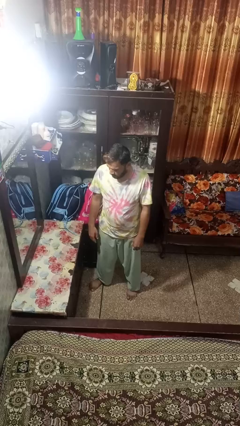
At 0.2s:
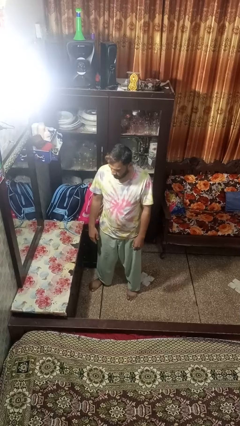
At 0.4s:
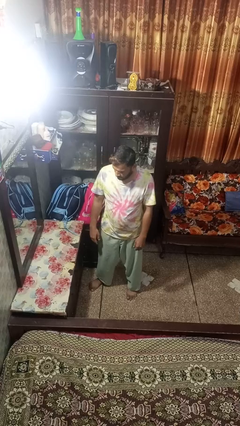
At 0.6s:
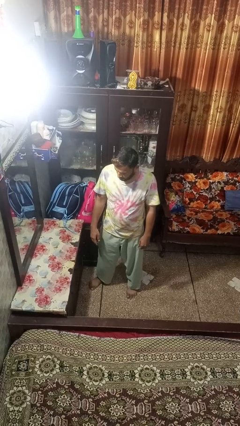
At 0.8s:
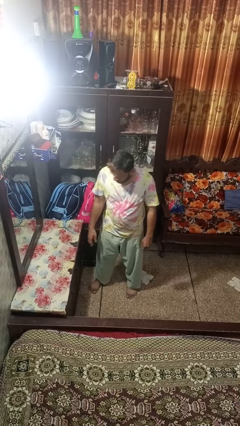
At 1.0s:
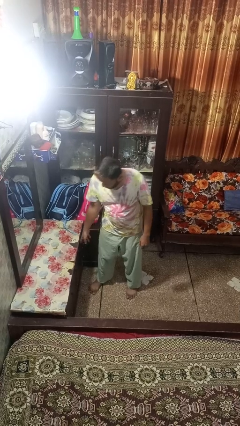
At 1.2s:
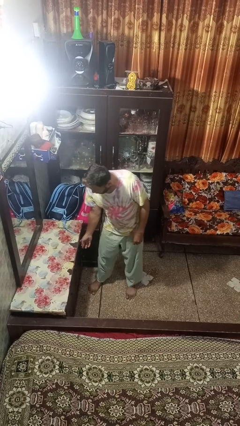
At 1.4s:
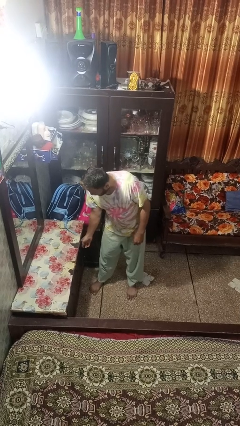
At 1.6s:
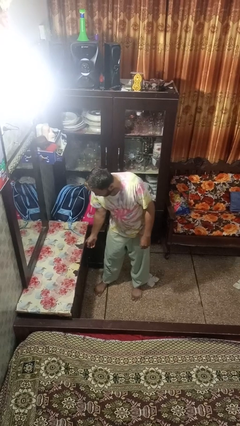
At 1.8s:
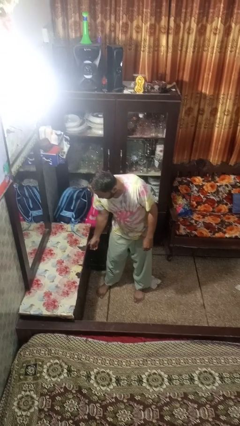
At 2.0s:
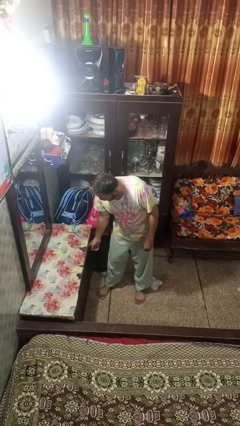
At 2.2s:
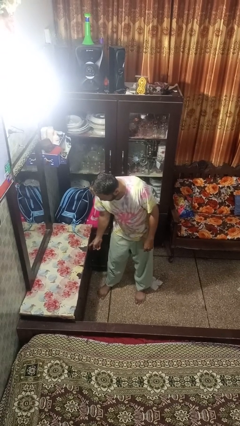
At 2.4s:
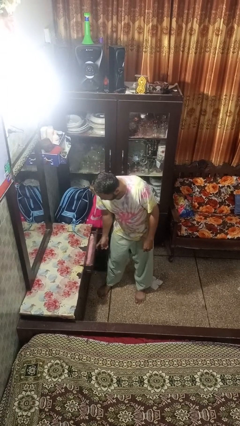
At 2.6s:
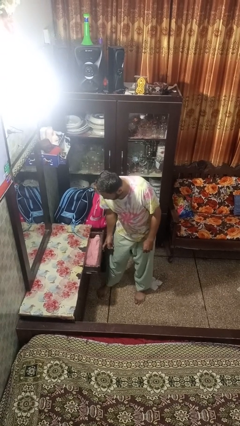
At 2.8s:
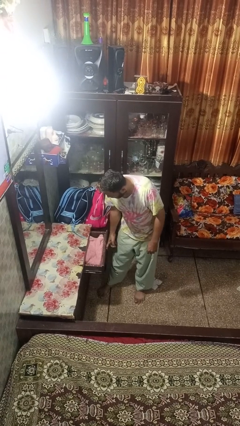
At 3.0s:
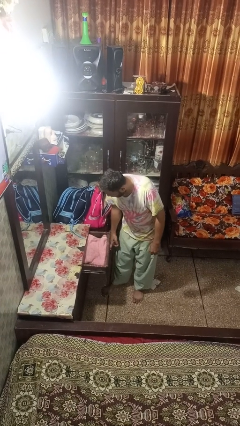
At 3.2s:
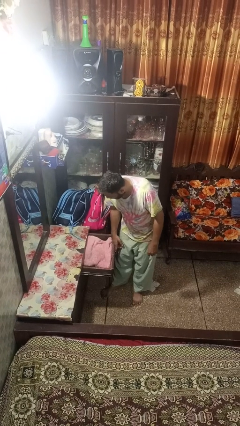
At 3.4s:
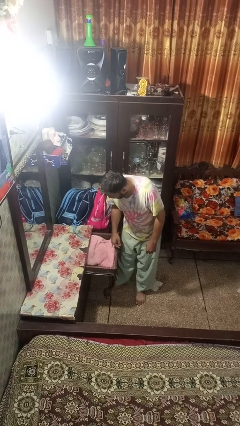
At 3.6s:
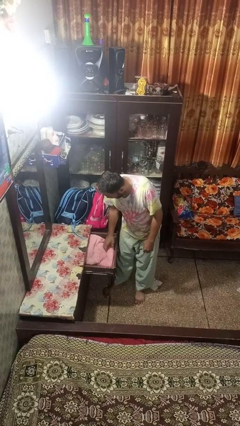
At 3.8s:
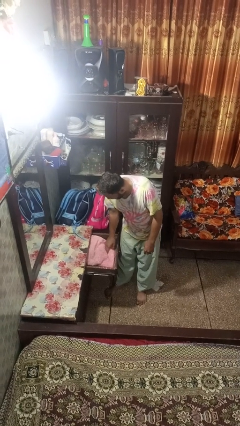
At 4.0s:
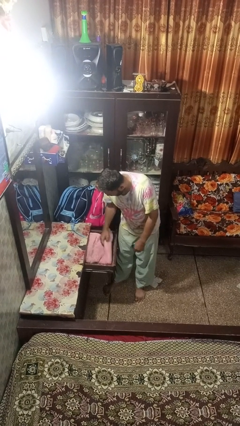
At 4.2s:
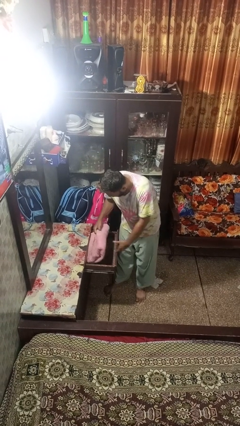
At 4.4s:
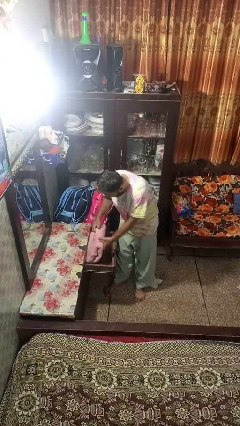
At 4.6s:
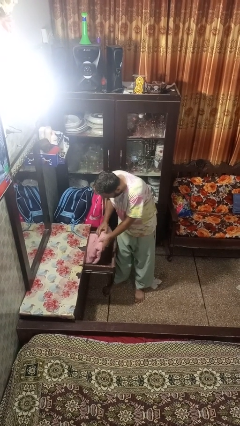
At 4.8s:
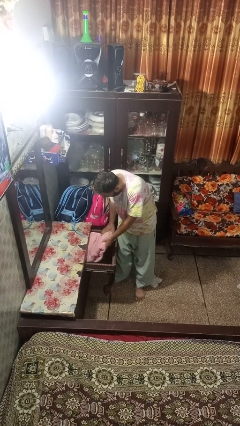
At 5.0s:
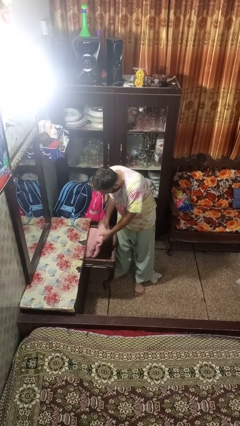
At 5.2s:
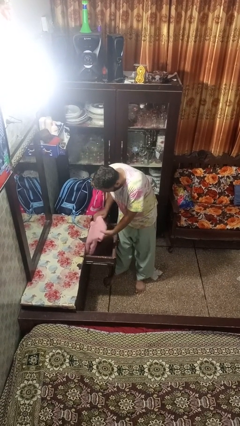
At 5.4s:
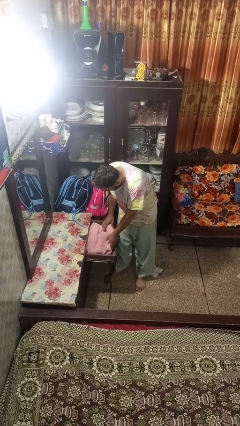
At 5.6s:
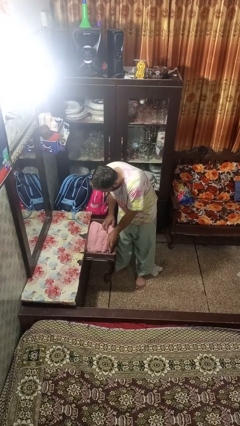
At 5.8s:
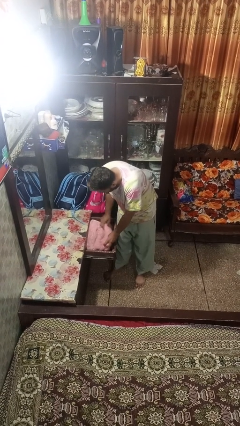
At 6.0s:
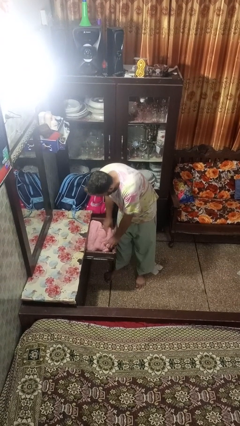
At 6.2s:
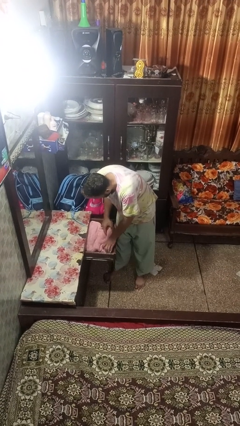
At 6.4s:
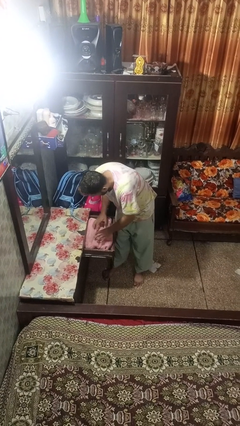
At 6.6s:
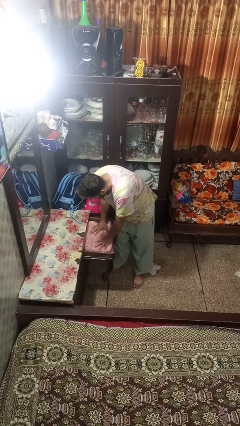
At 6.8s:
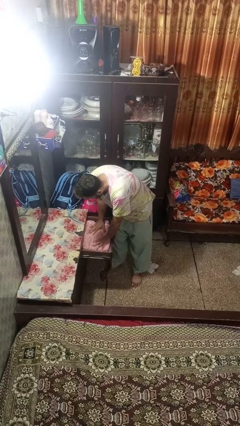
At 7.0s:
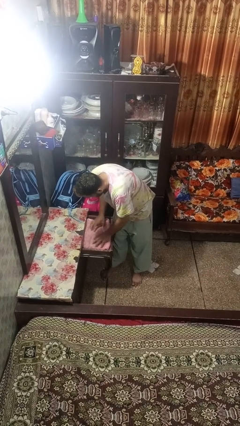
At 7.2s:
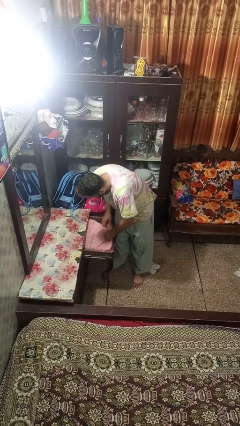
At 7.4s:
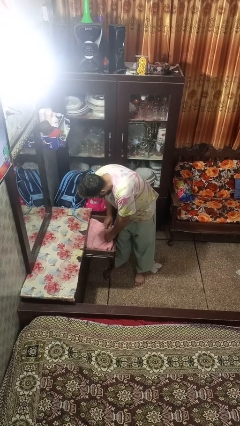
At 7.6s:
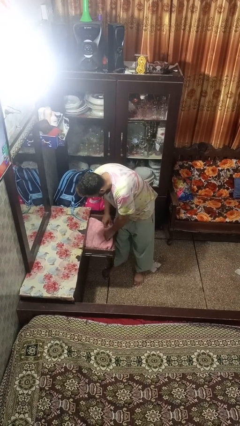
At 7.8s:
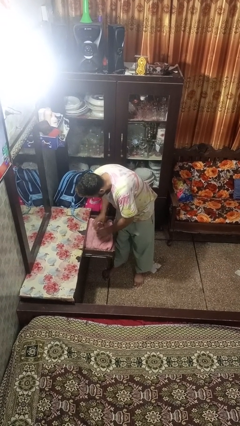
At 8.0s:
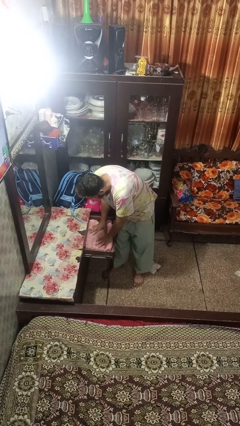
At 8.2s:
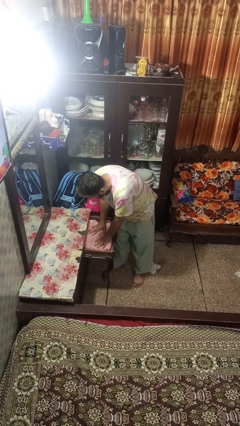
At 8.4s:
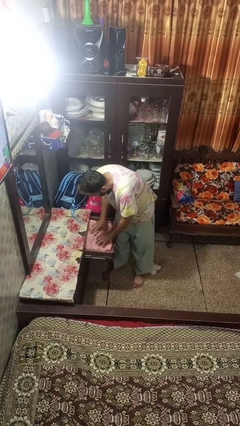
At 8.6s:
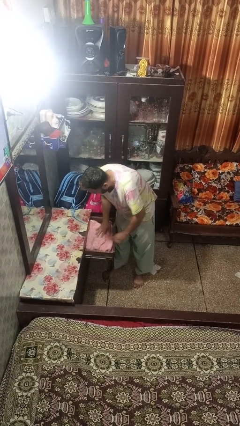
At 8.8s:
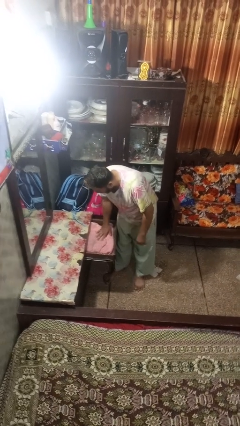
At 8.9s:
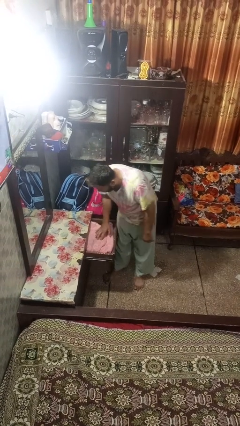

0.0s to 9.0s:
person opens dresser drawer

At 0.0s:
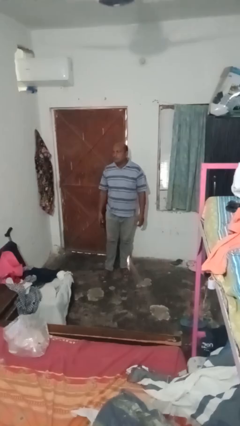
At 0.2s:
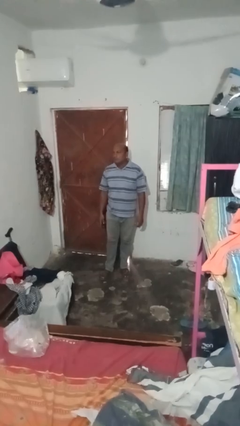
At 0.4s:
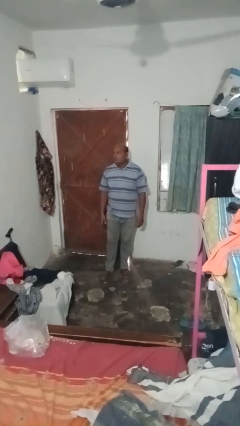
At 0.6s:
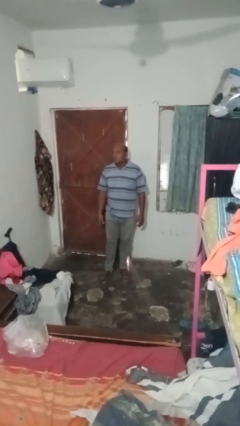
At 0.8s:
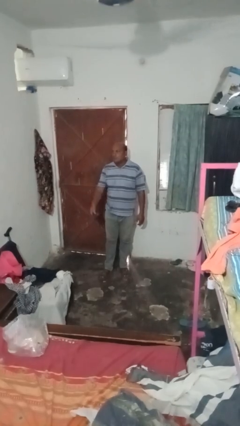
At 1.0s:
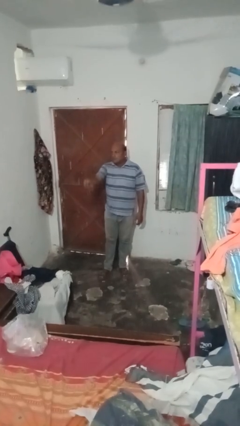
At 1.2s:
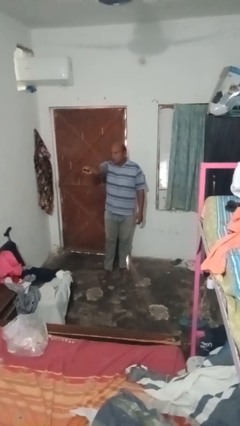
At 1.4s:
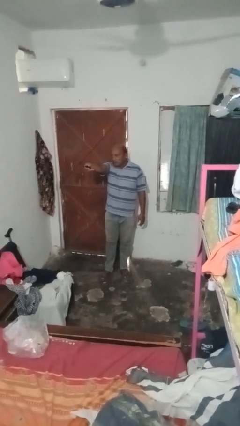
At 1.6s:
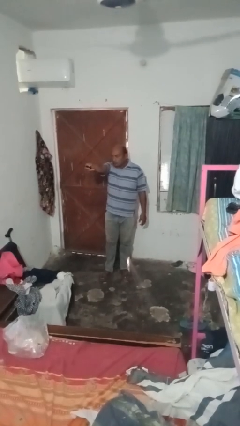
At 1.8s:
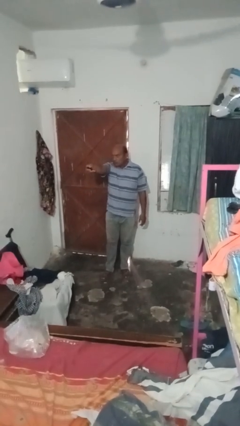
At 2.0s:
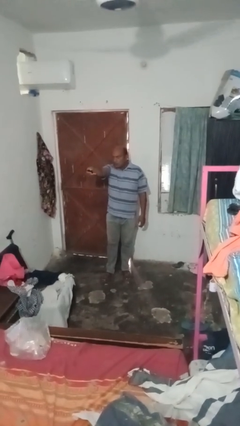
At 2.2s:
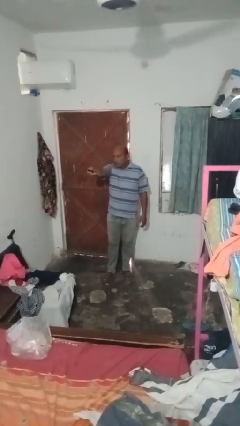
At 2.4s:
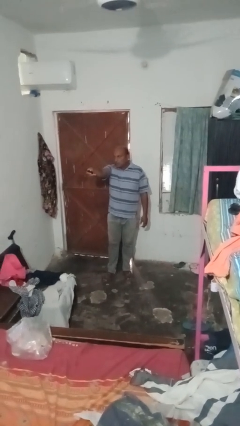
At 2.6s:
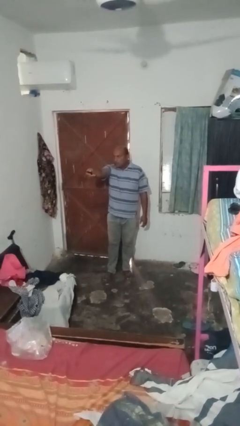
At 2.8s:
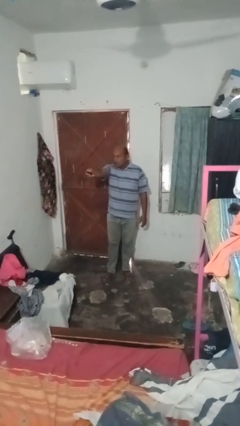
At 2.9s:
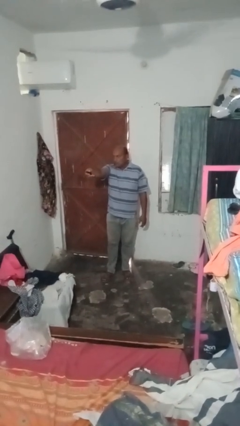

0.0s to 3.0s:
person uses television remote

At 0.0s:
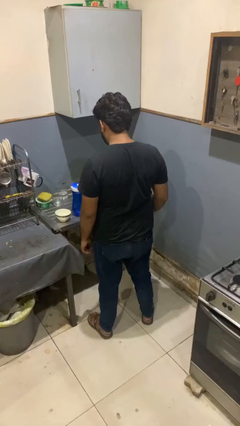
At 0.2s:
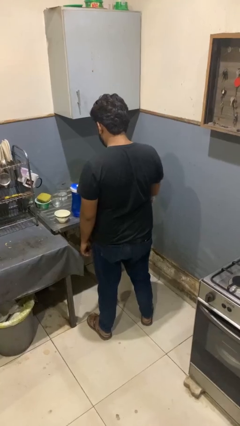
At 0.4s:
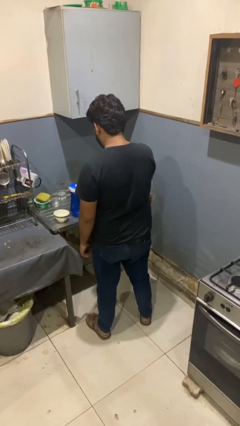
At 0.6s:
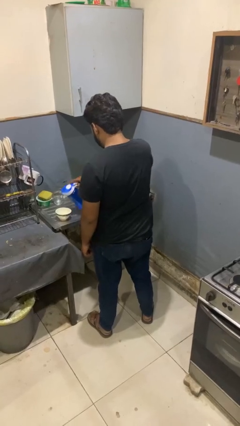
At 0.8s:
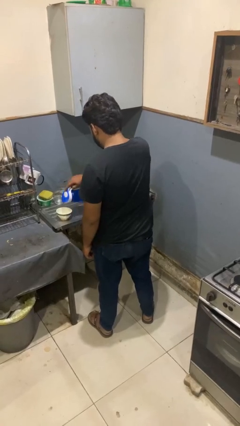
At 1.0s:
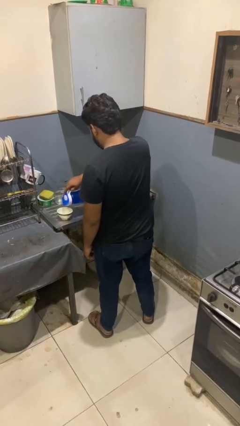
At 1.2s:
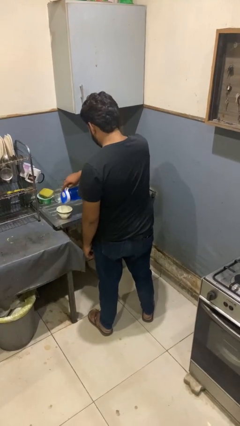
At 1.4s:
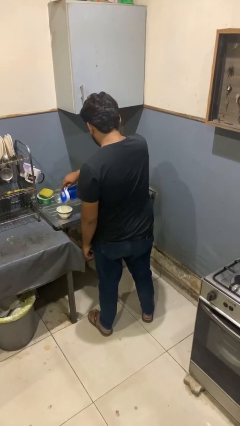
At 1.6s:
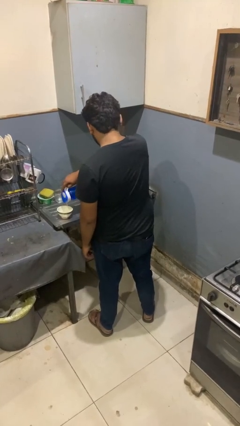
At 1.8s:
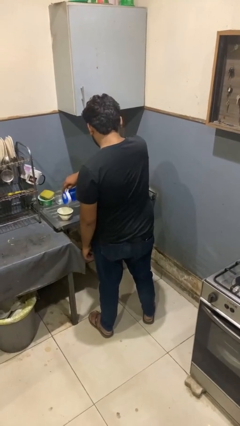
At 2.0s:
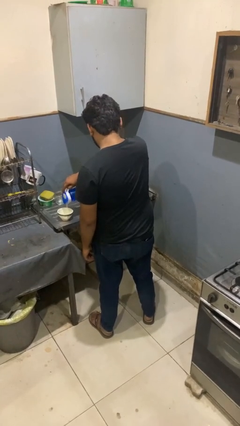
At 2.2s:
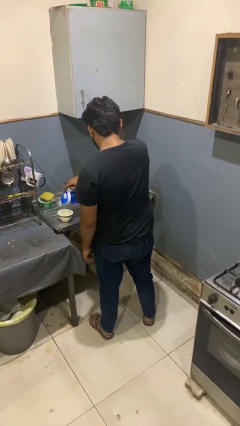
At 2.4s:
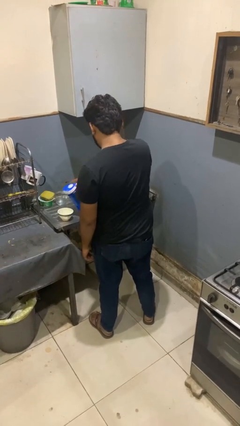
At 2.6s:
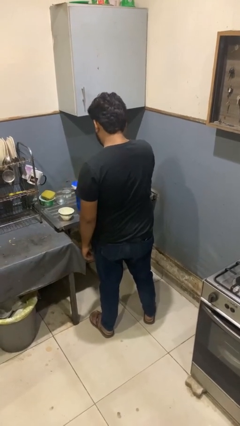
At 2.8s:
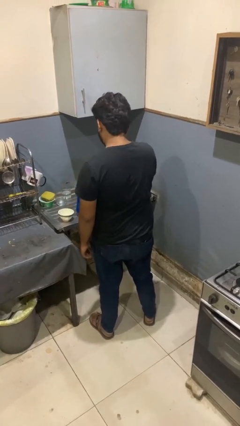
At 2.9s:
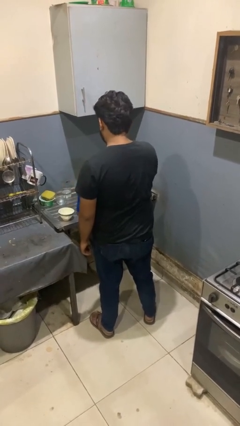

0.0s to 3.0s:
person pours into bowl

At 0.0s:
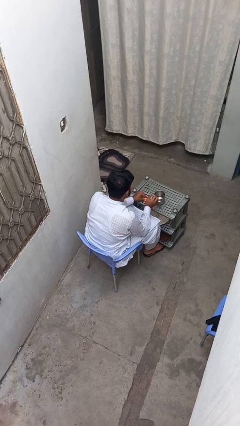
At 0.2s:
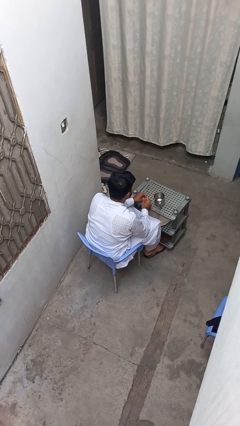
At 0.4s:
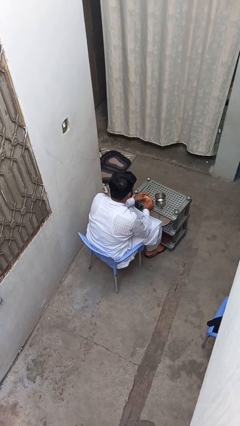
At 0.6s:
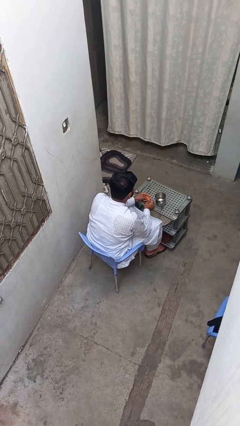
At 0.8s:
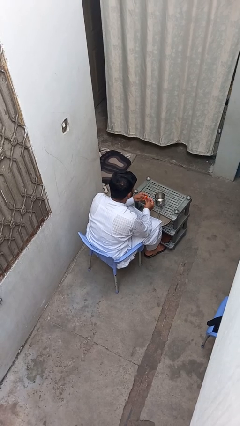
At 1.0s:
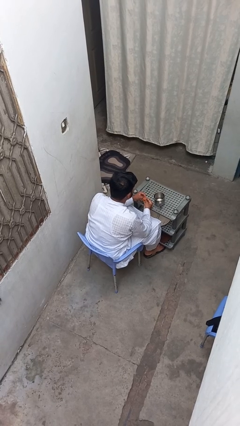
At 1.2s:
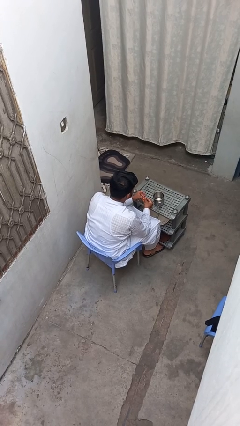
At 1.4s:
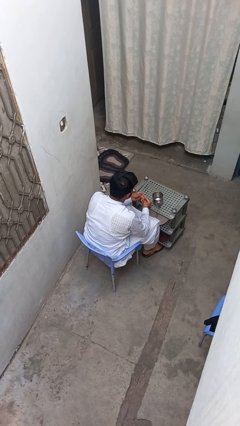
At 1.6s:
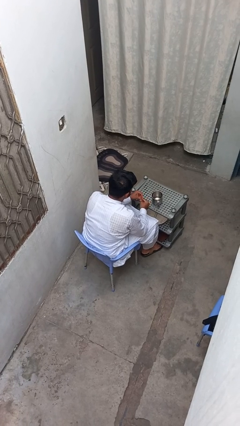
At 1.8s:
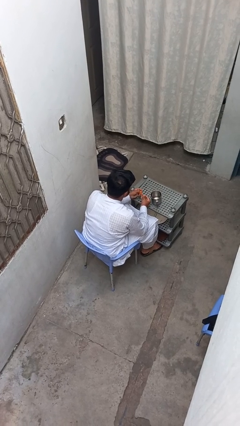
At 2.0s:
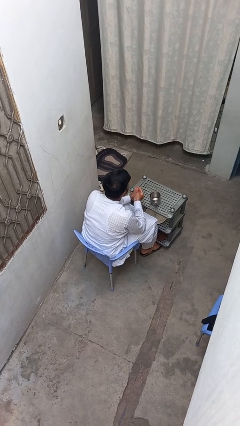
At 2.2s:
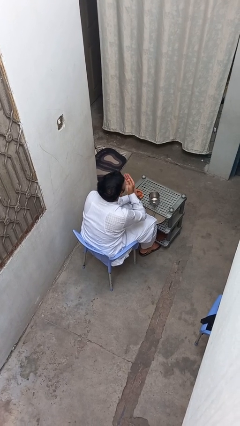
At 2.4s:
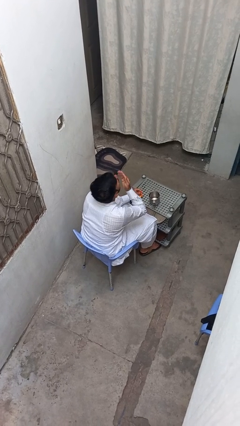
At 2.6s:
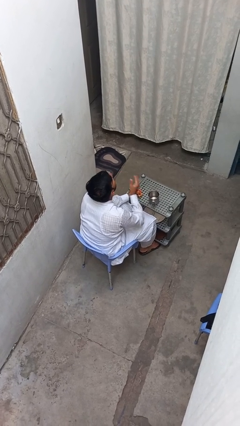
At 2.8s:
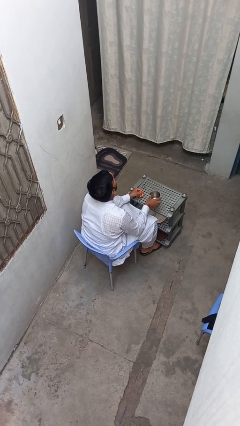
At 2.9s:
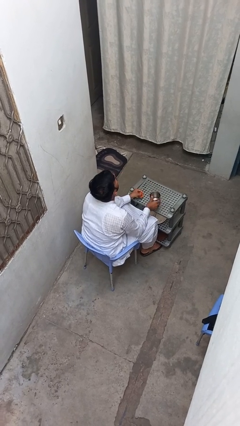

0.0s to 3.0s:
person takes medicine pills
